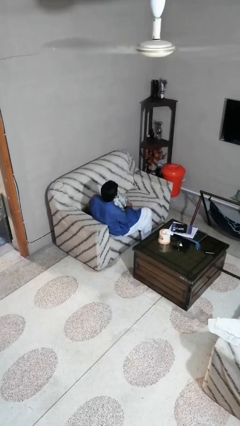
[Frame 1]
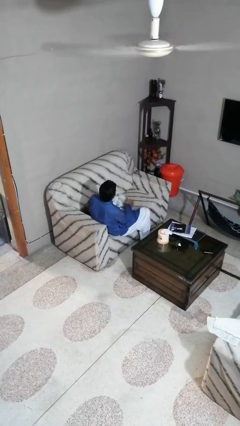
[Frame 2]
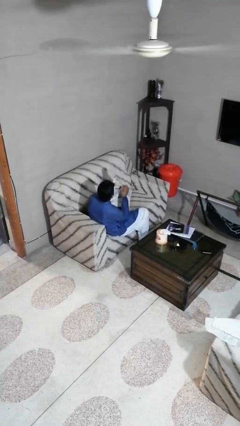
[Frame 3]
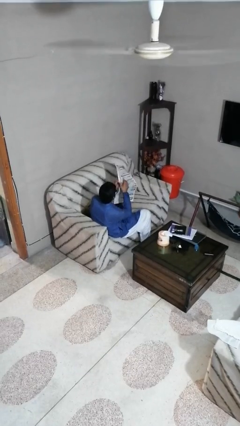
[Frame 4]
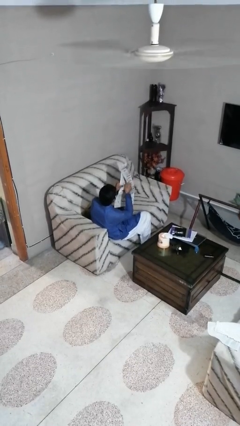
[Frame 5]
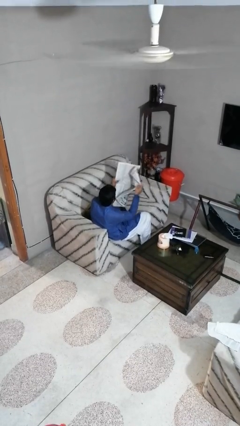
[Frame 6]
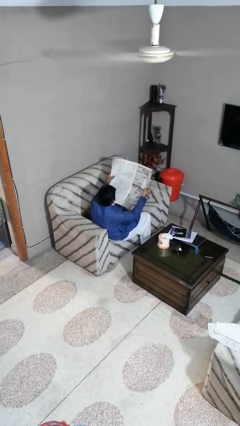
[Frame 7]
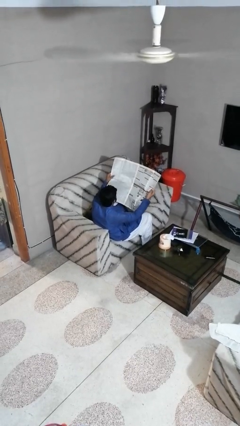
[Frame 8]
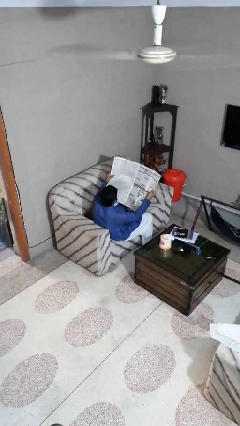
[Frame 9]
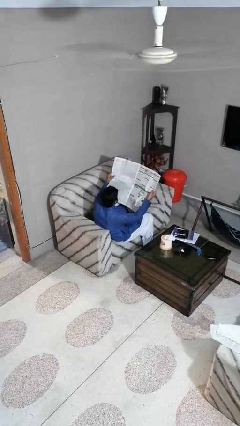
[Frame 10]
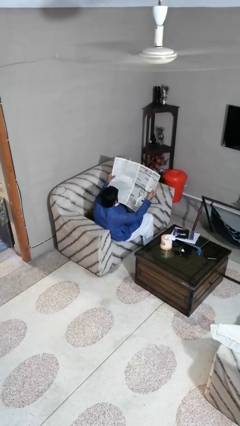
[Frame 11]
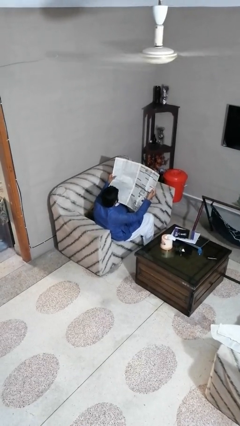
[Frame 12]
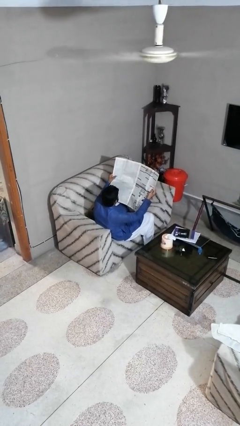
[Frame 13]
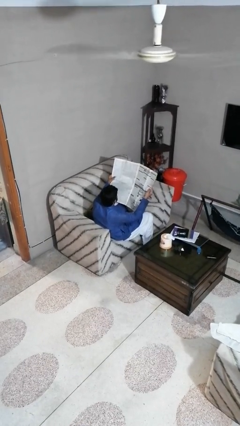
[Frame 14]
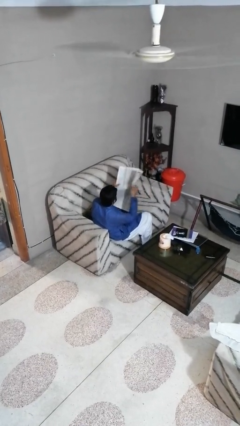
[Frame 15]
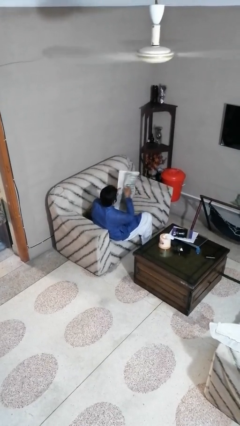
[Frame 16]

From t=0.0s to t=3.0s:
person reads newspaper

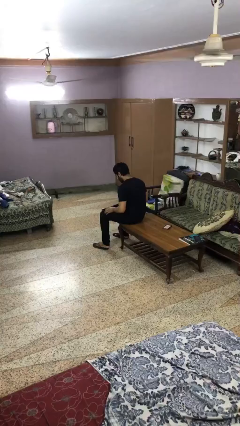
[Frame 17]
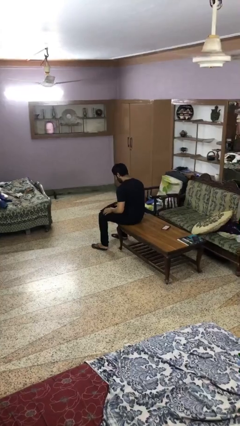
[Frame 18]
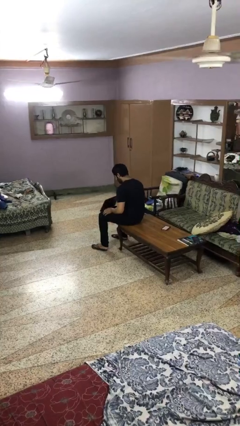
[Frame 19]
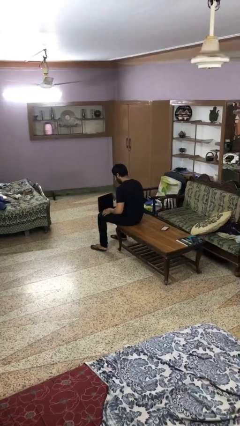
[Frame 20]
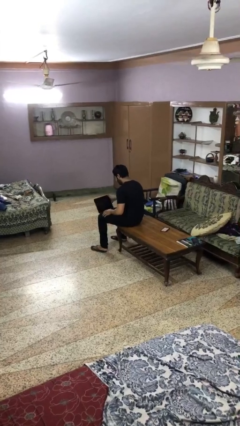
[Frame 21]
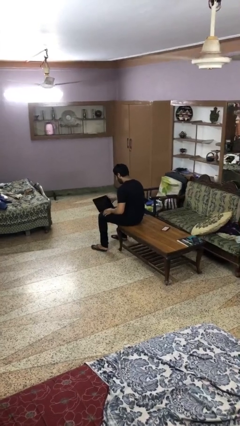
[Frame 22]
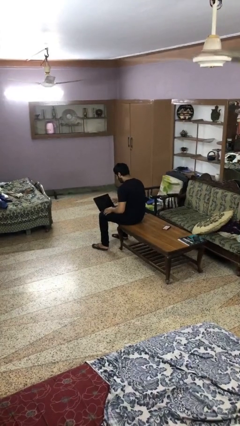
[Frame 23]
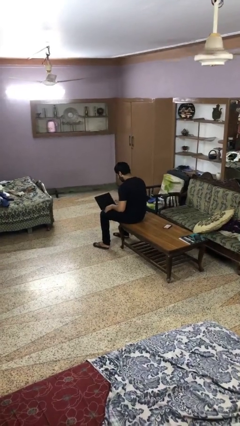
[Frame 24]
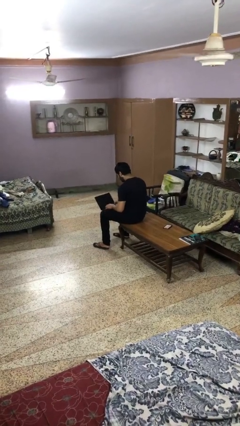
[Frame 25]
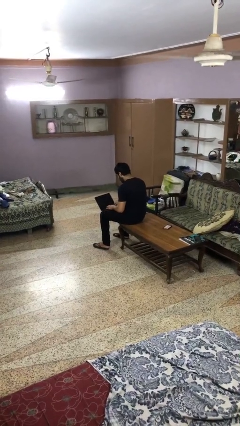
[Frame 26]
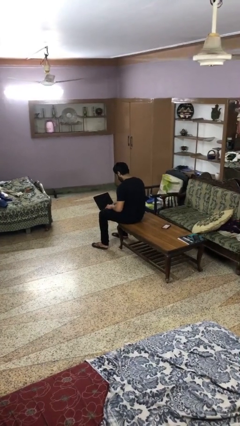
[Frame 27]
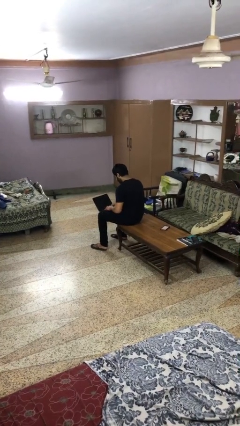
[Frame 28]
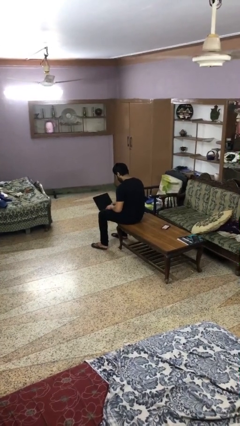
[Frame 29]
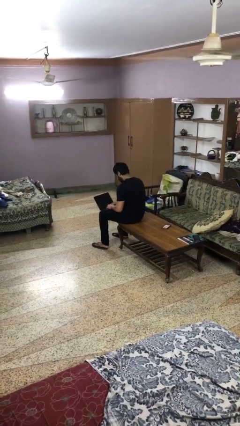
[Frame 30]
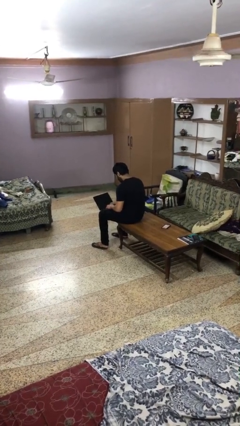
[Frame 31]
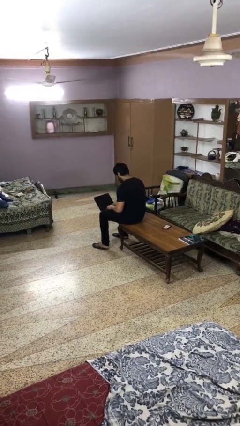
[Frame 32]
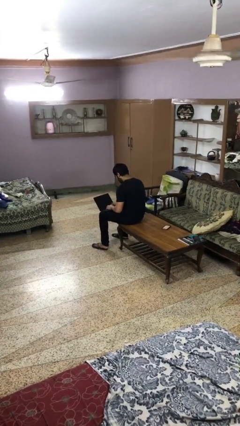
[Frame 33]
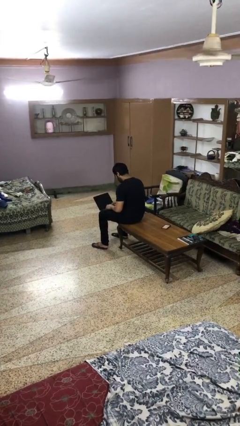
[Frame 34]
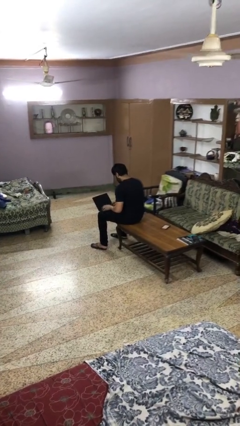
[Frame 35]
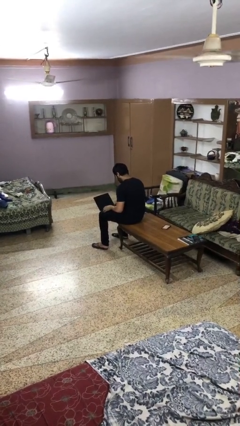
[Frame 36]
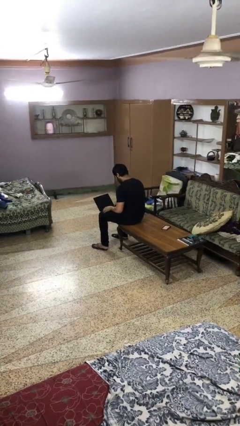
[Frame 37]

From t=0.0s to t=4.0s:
person opens laptop

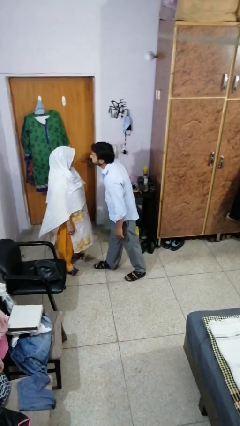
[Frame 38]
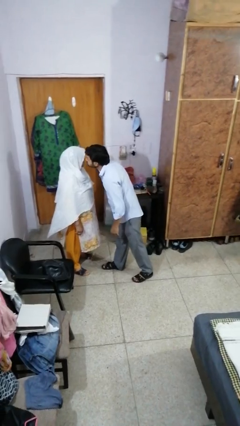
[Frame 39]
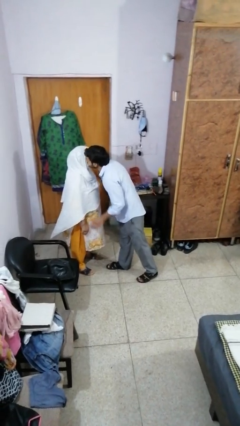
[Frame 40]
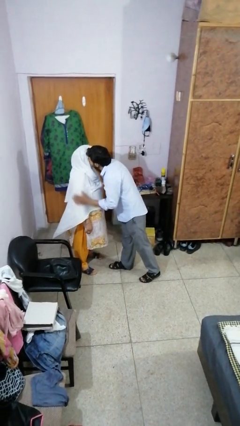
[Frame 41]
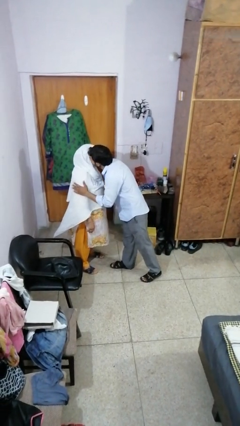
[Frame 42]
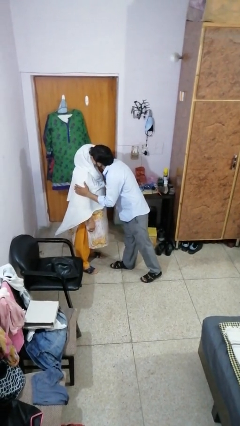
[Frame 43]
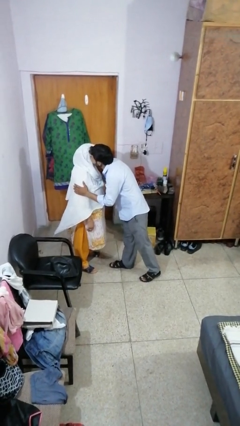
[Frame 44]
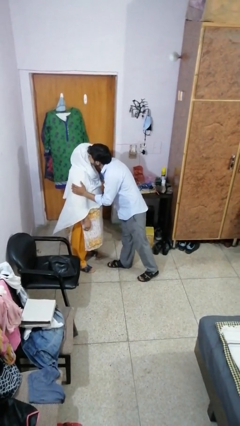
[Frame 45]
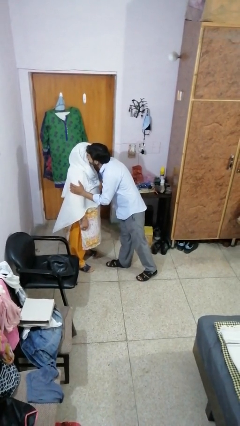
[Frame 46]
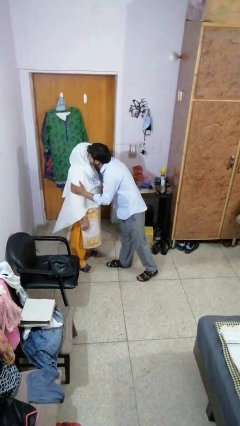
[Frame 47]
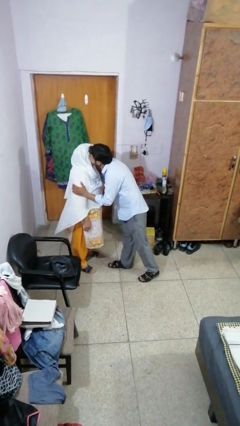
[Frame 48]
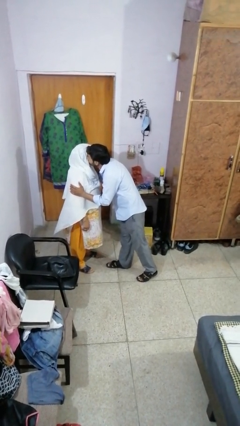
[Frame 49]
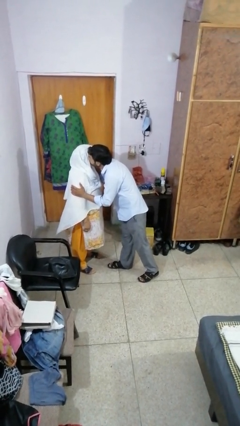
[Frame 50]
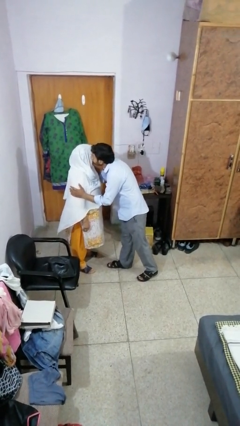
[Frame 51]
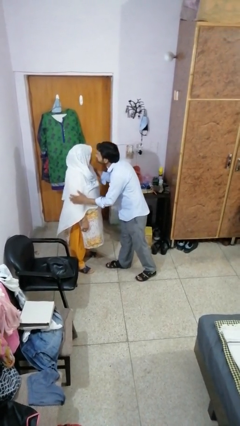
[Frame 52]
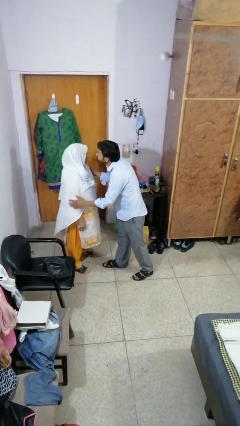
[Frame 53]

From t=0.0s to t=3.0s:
person kisses cheek of person

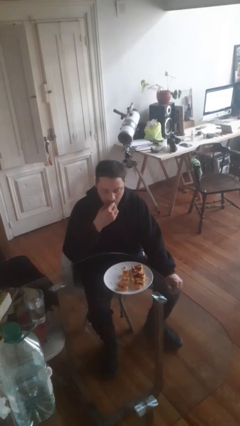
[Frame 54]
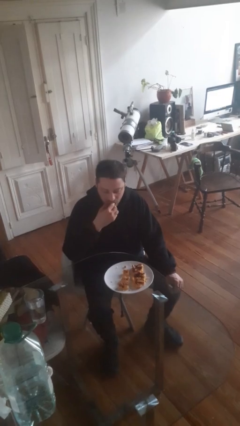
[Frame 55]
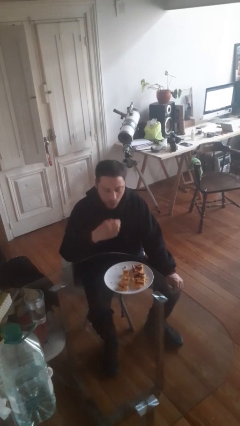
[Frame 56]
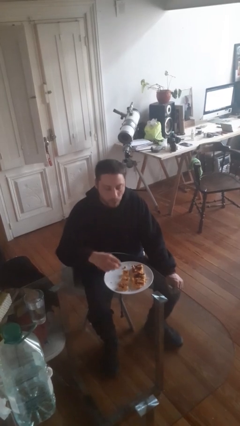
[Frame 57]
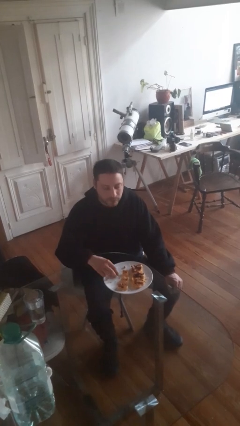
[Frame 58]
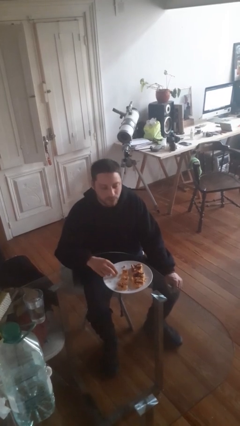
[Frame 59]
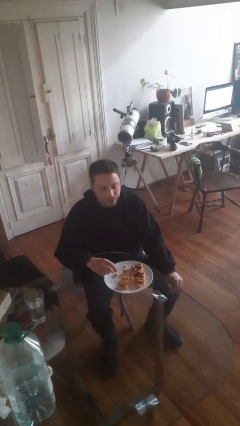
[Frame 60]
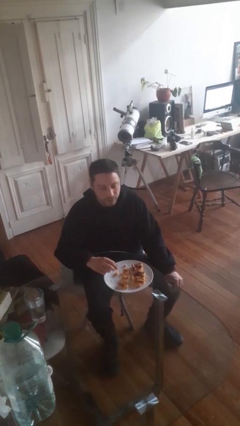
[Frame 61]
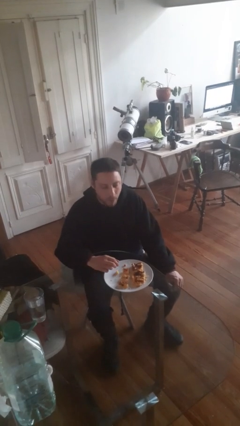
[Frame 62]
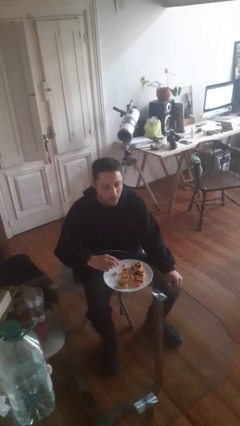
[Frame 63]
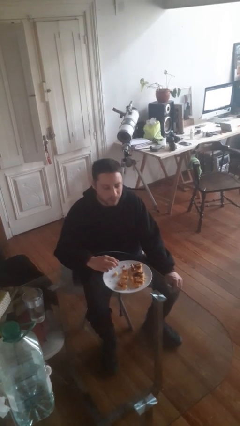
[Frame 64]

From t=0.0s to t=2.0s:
person eats with hands

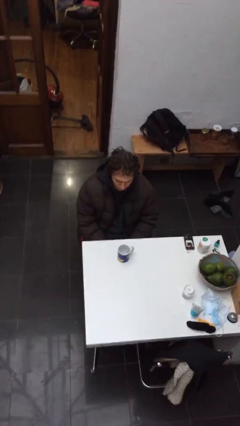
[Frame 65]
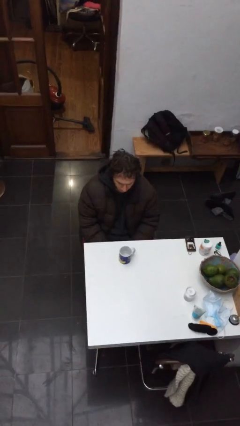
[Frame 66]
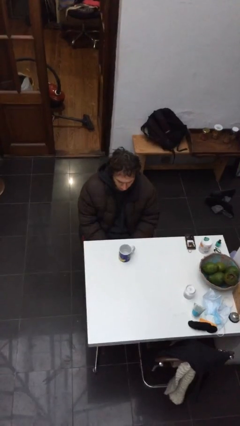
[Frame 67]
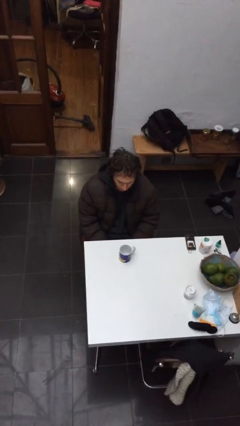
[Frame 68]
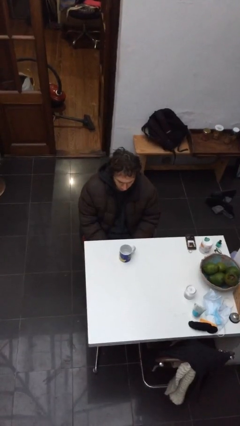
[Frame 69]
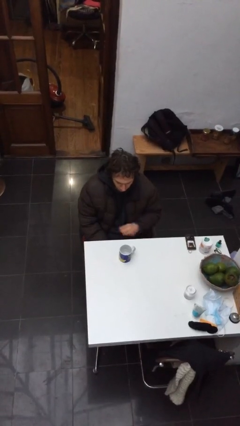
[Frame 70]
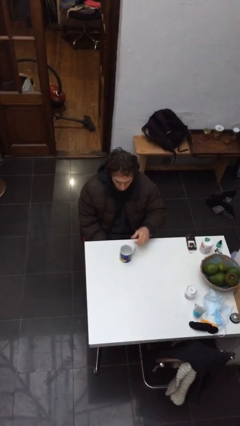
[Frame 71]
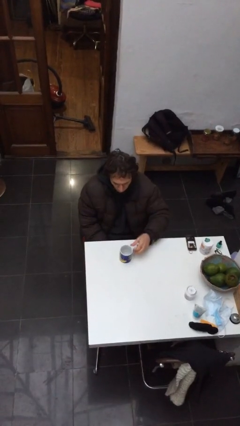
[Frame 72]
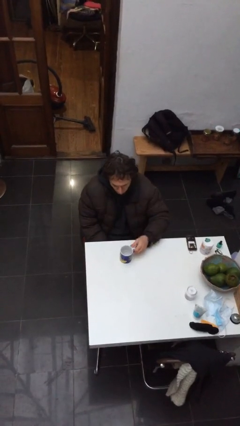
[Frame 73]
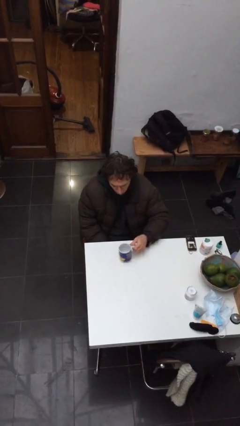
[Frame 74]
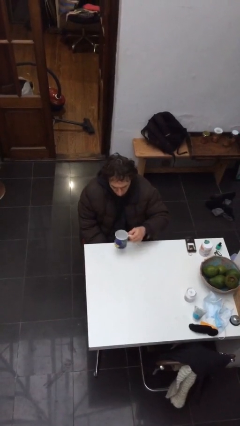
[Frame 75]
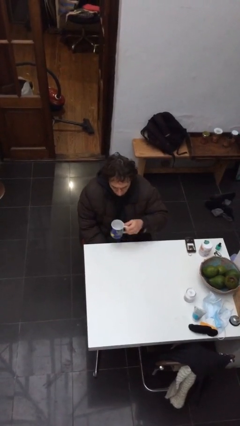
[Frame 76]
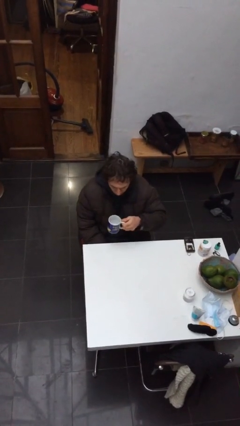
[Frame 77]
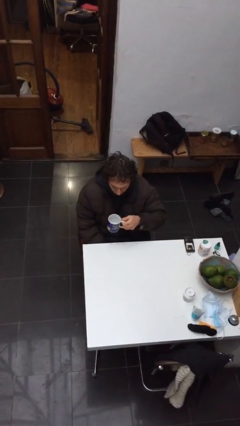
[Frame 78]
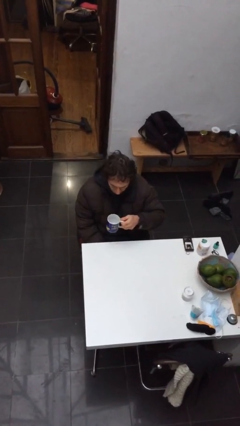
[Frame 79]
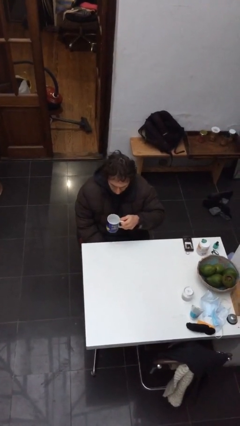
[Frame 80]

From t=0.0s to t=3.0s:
person picks up object from table

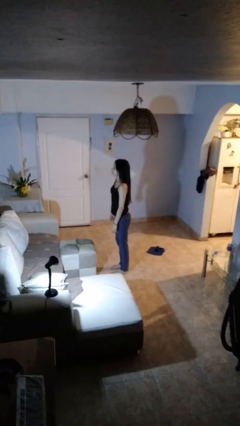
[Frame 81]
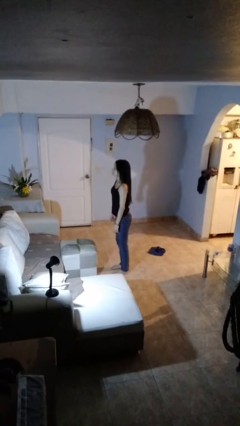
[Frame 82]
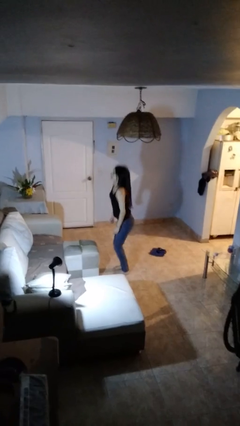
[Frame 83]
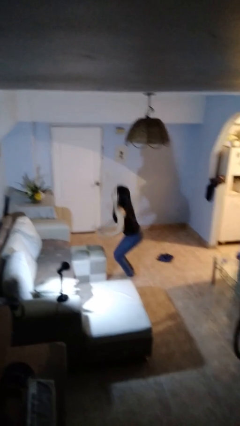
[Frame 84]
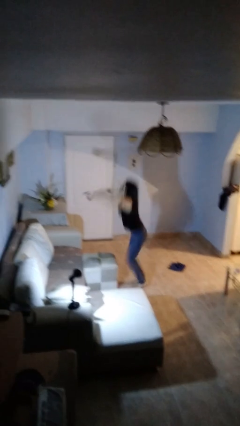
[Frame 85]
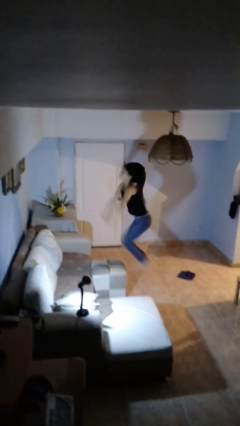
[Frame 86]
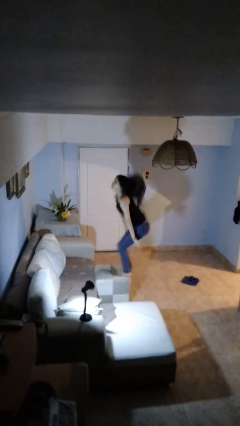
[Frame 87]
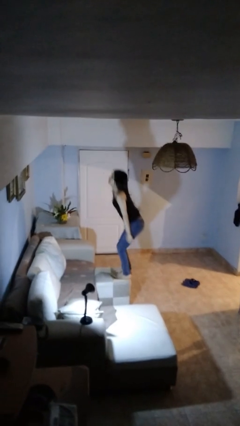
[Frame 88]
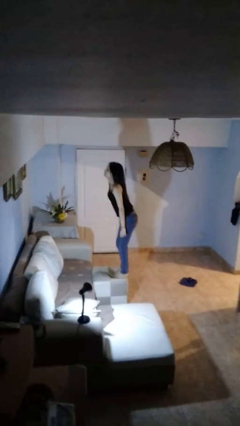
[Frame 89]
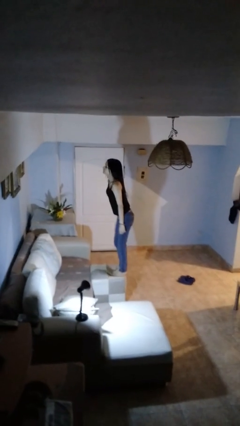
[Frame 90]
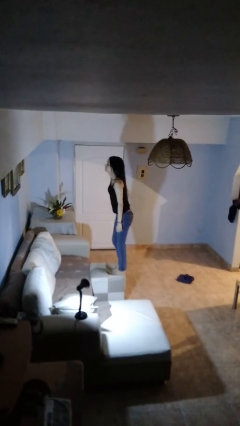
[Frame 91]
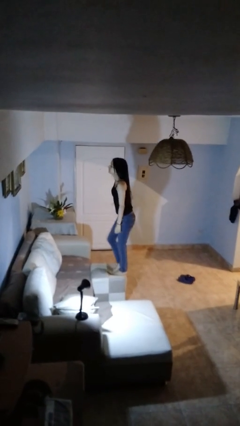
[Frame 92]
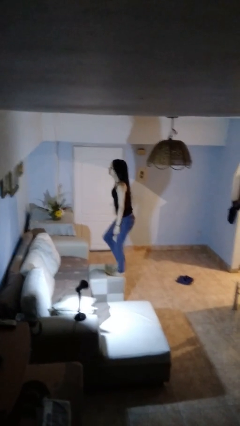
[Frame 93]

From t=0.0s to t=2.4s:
person jumps on couch
